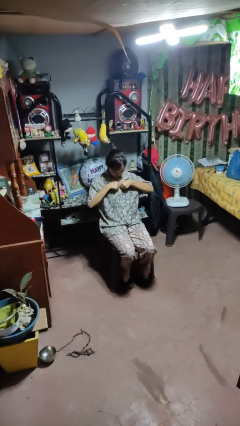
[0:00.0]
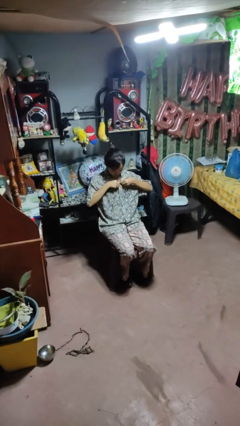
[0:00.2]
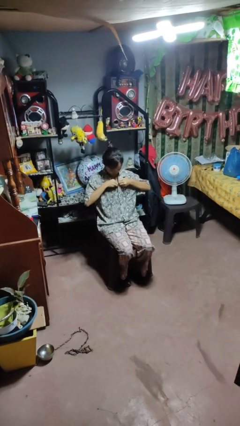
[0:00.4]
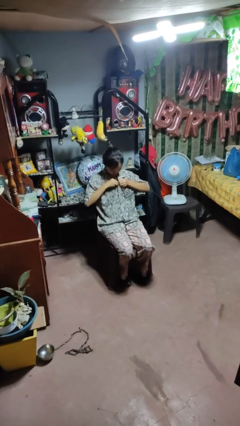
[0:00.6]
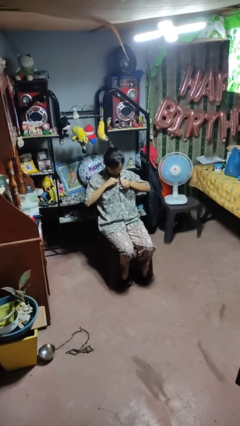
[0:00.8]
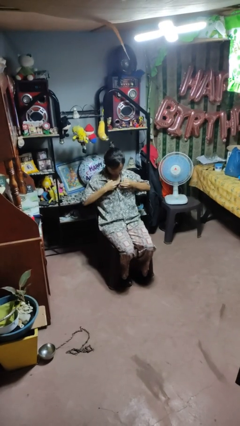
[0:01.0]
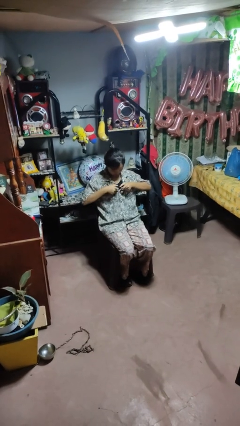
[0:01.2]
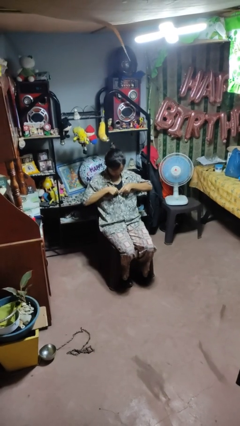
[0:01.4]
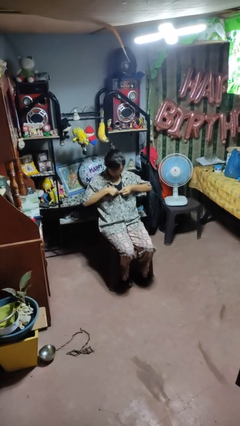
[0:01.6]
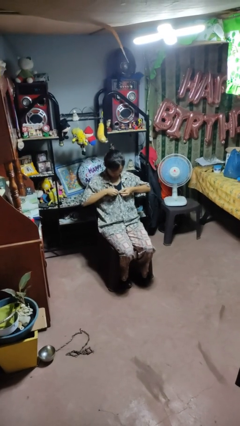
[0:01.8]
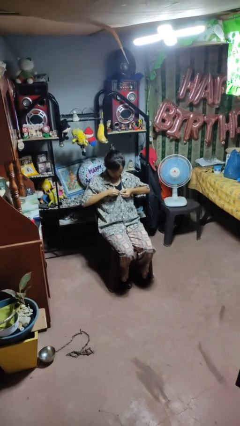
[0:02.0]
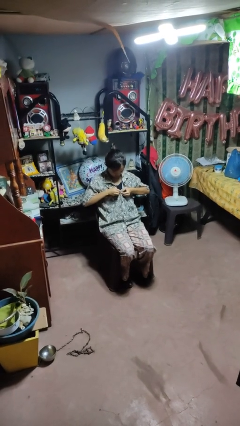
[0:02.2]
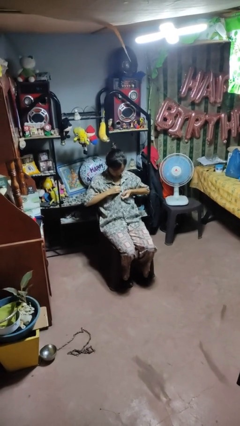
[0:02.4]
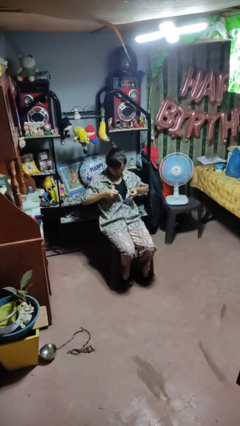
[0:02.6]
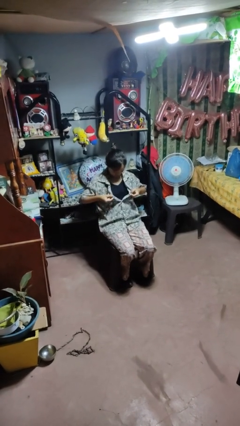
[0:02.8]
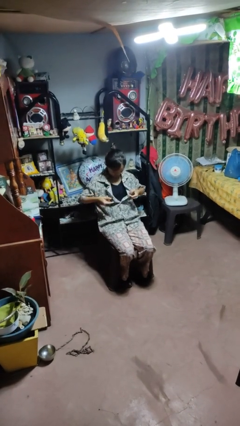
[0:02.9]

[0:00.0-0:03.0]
person unbuttons shirt

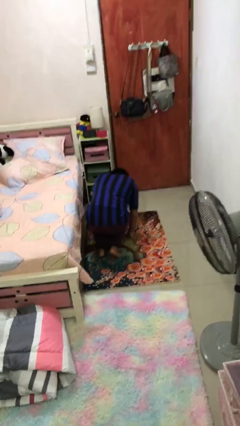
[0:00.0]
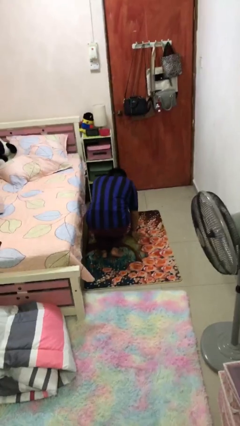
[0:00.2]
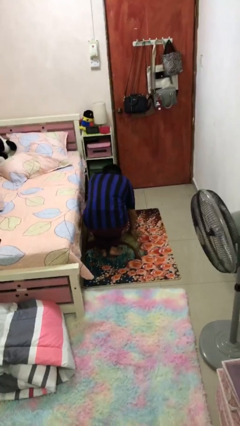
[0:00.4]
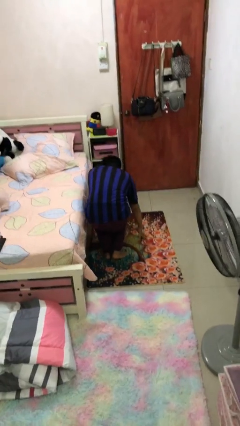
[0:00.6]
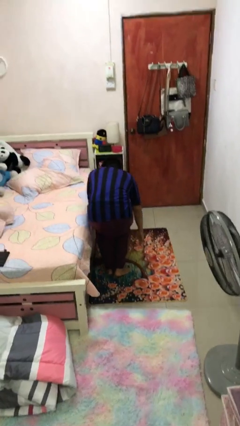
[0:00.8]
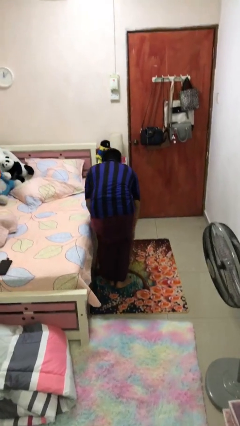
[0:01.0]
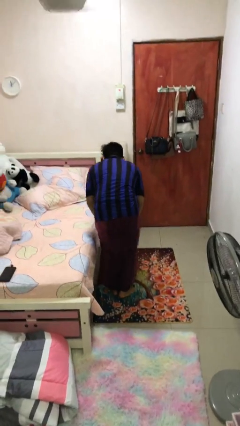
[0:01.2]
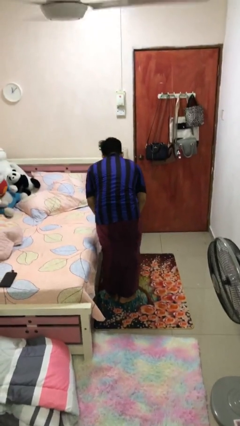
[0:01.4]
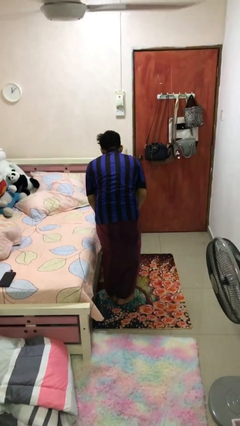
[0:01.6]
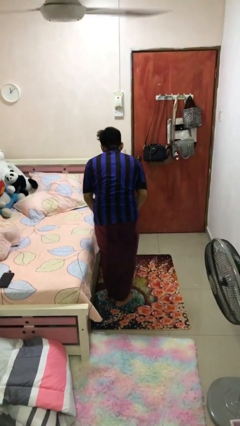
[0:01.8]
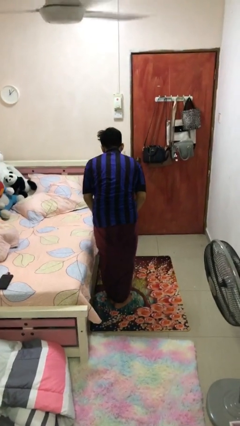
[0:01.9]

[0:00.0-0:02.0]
person stands up from floor

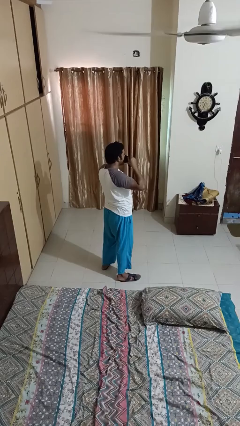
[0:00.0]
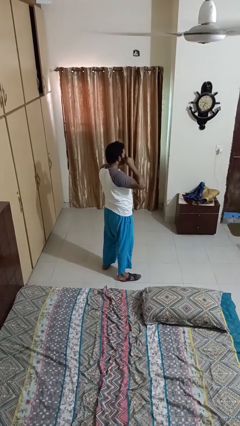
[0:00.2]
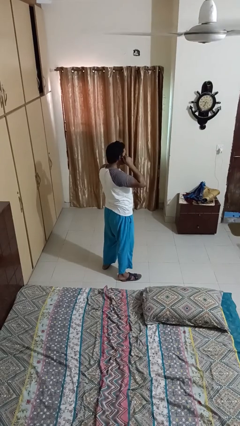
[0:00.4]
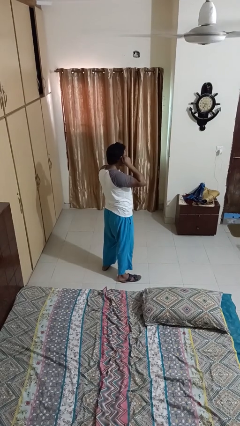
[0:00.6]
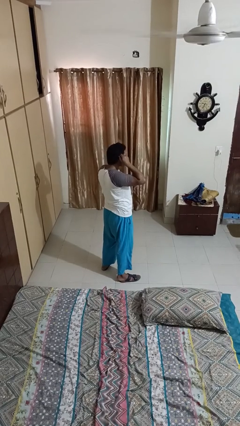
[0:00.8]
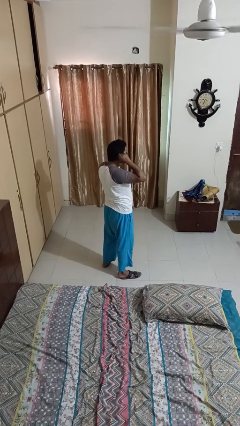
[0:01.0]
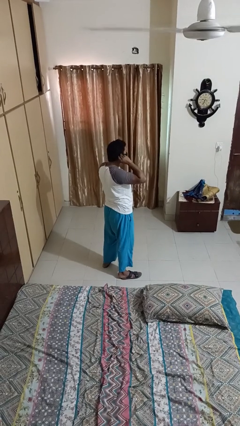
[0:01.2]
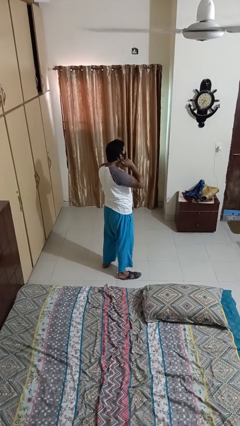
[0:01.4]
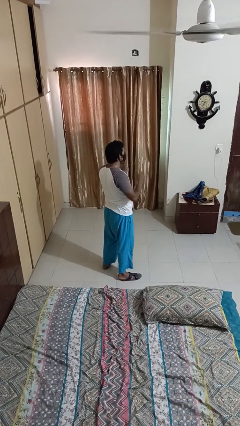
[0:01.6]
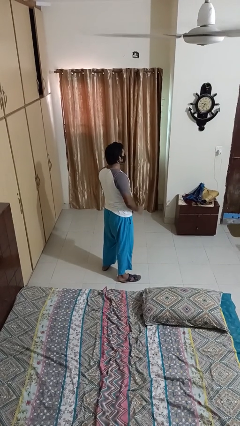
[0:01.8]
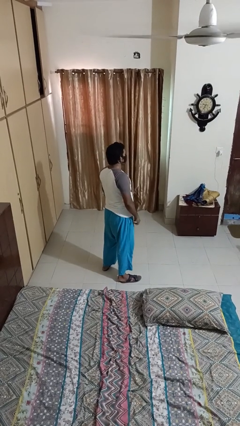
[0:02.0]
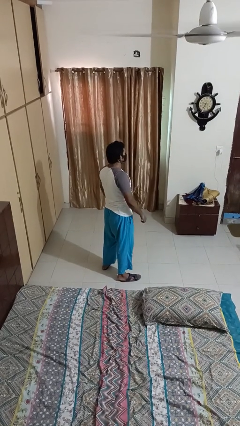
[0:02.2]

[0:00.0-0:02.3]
person puts on facemask

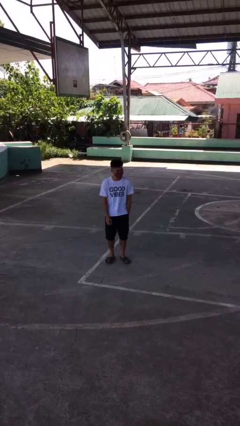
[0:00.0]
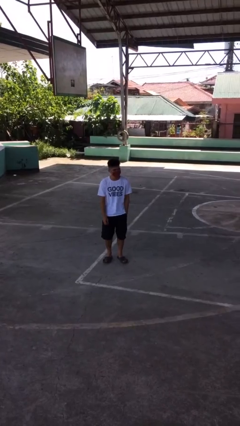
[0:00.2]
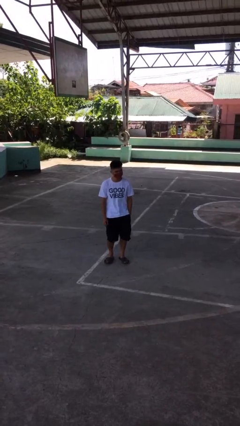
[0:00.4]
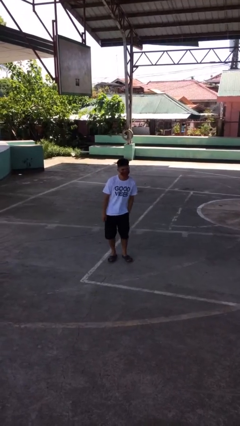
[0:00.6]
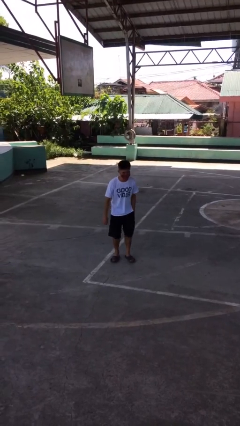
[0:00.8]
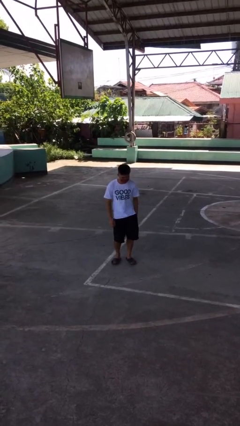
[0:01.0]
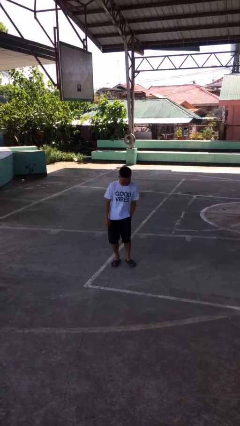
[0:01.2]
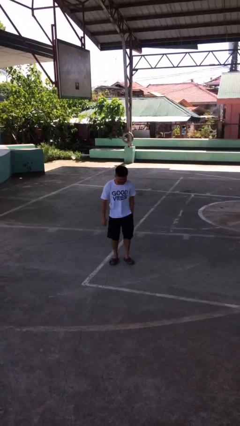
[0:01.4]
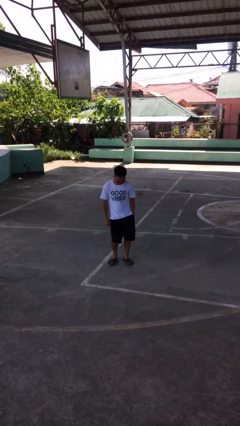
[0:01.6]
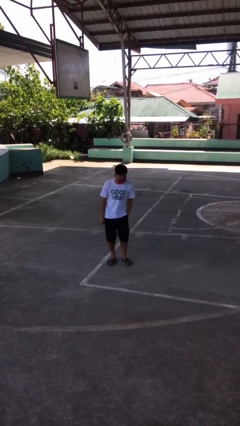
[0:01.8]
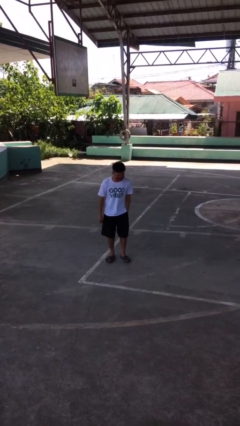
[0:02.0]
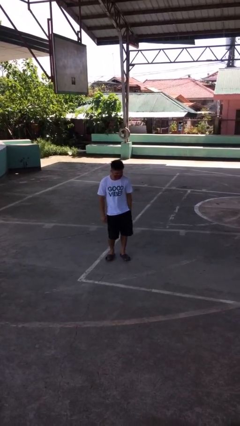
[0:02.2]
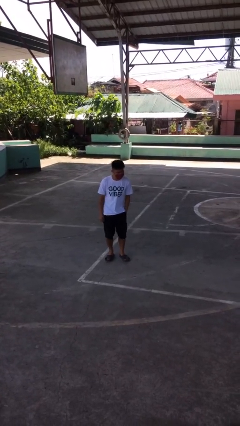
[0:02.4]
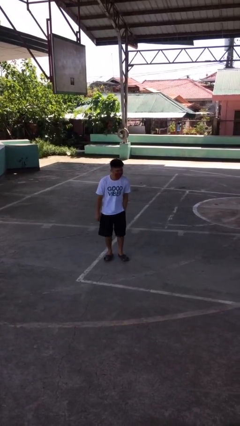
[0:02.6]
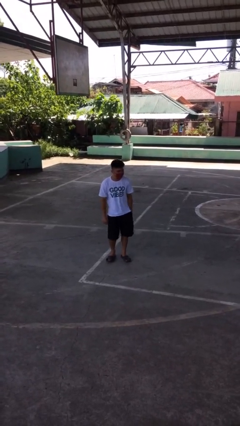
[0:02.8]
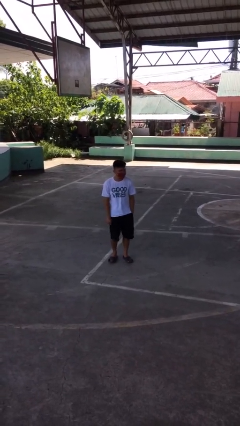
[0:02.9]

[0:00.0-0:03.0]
person wiggles hips

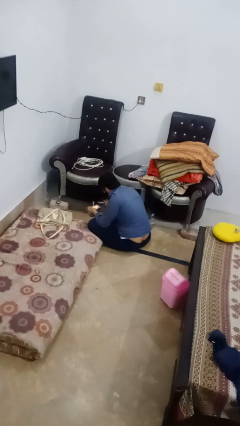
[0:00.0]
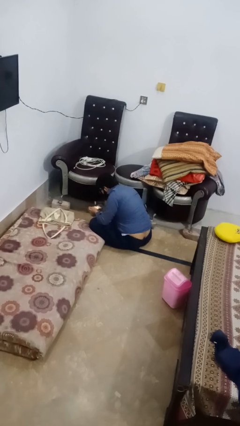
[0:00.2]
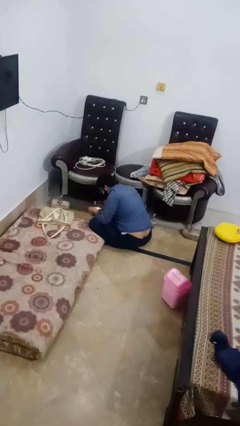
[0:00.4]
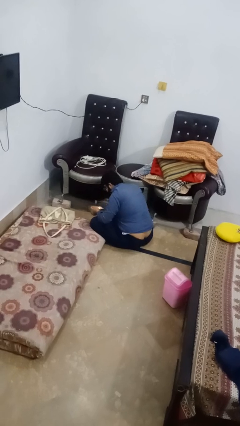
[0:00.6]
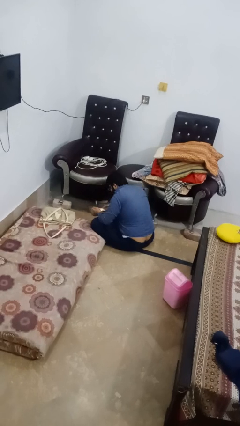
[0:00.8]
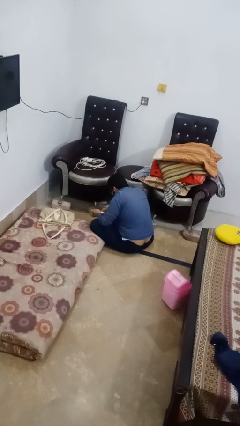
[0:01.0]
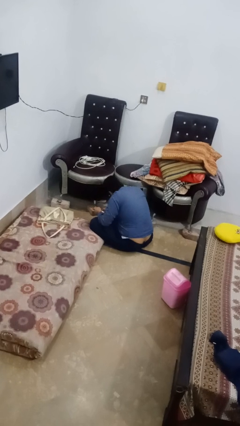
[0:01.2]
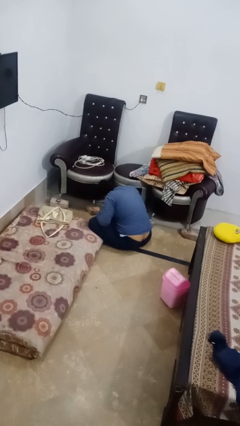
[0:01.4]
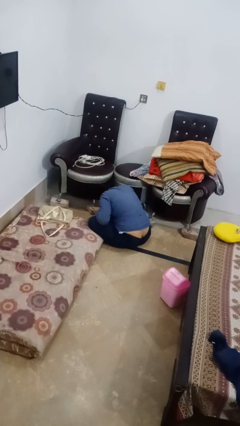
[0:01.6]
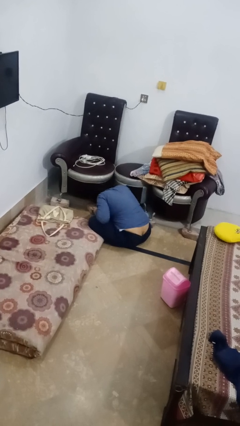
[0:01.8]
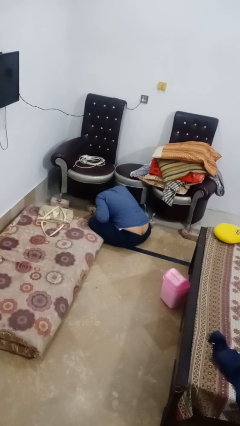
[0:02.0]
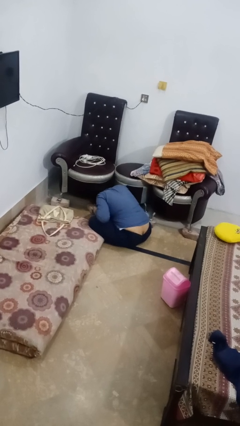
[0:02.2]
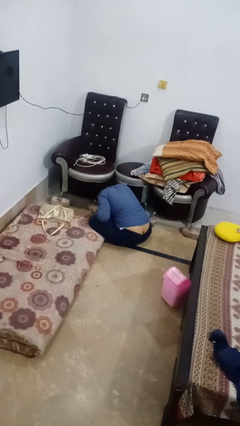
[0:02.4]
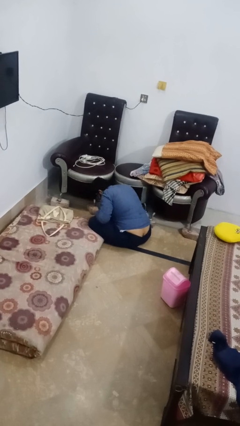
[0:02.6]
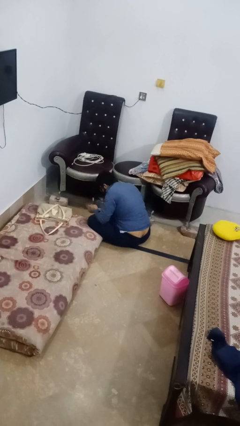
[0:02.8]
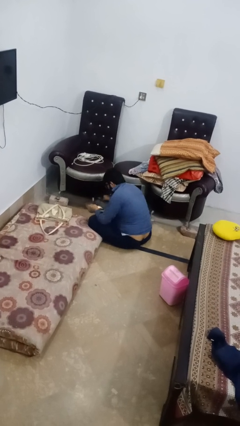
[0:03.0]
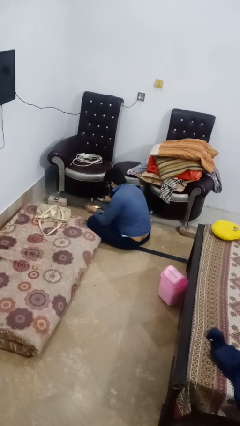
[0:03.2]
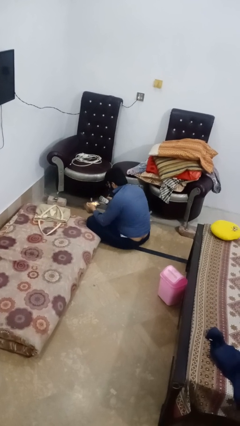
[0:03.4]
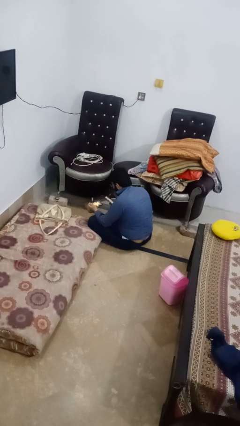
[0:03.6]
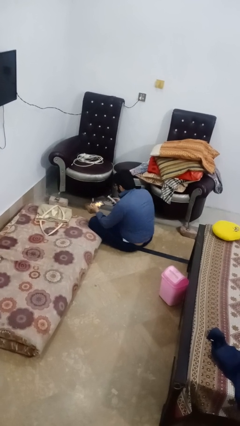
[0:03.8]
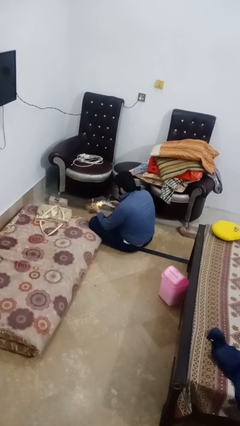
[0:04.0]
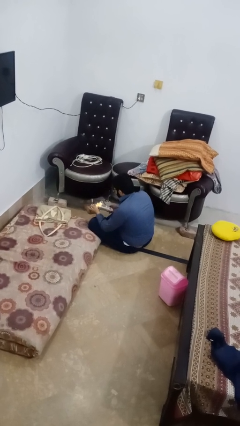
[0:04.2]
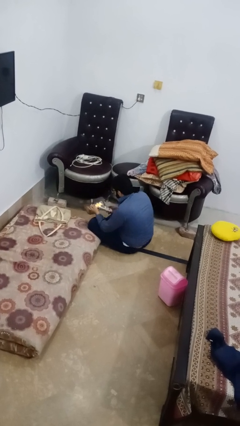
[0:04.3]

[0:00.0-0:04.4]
person searches under couch

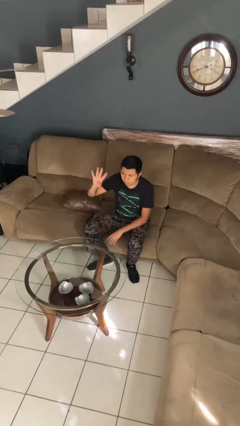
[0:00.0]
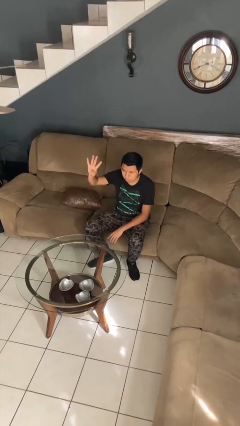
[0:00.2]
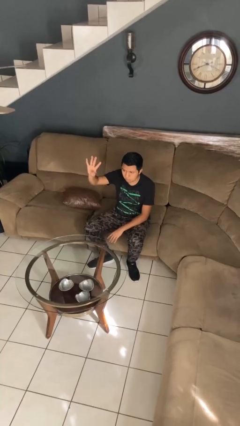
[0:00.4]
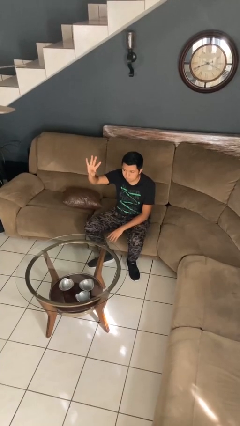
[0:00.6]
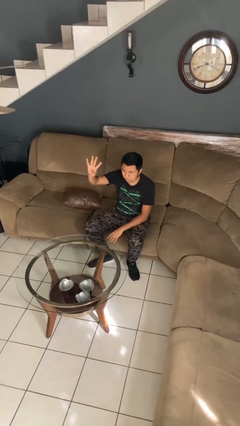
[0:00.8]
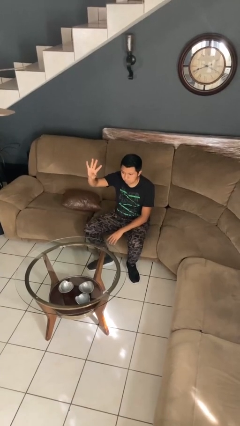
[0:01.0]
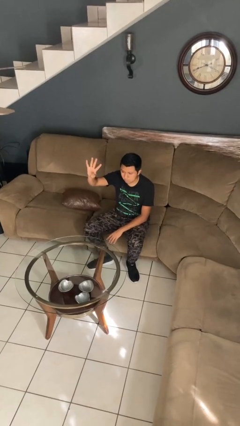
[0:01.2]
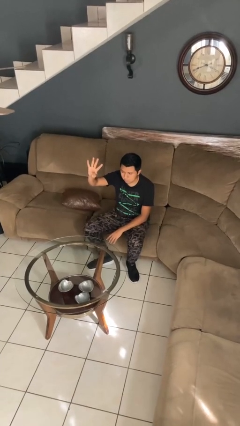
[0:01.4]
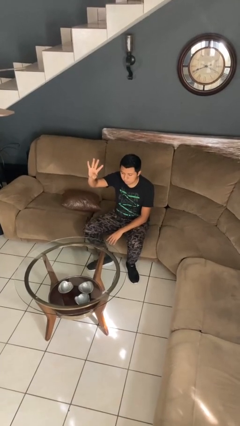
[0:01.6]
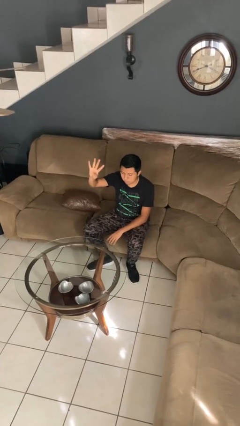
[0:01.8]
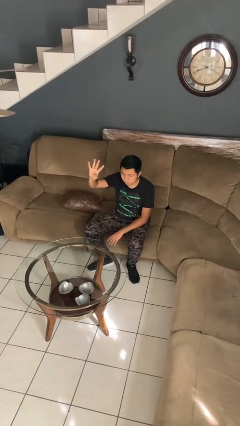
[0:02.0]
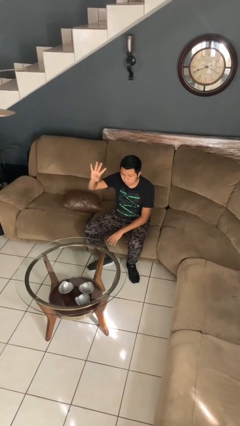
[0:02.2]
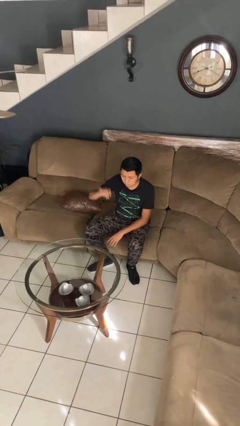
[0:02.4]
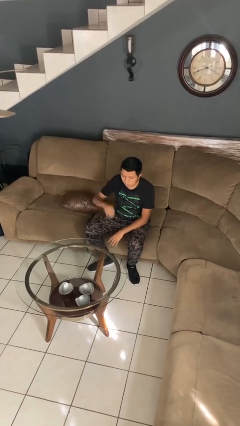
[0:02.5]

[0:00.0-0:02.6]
person gestures number four

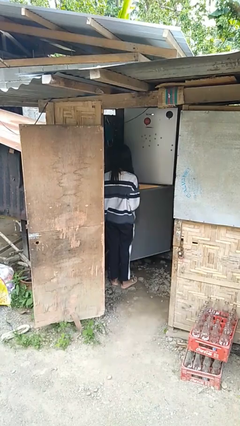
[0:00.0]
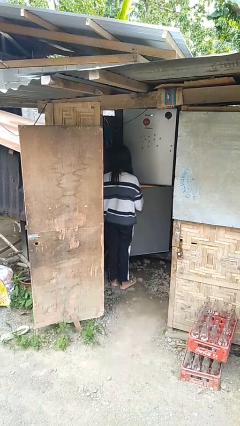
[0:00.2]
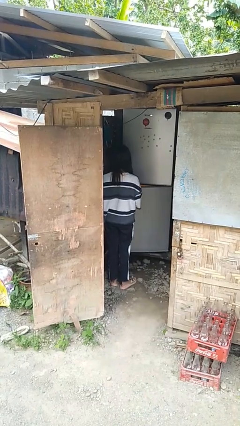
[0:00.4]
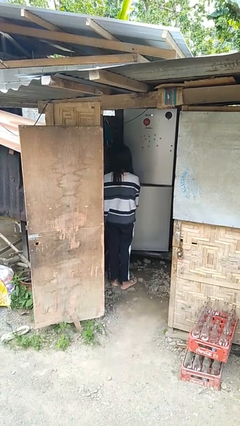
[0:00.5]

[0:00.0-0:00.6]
person closes refrigerator
